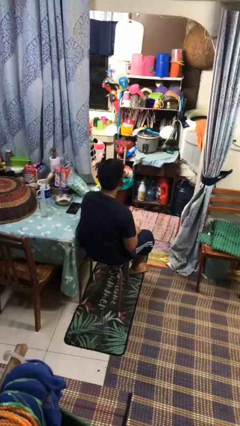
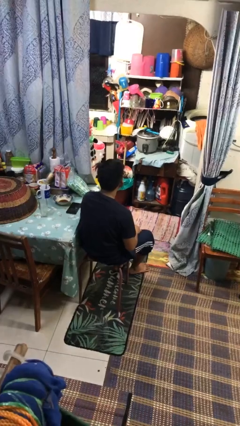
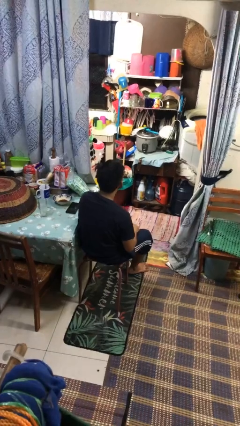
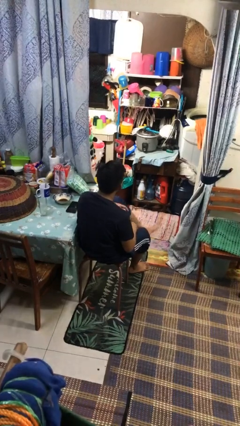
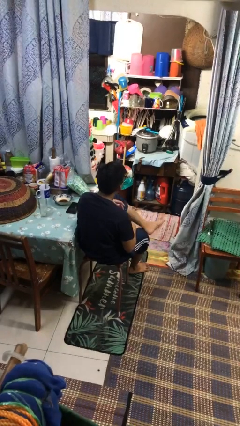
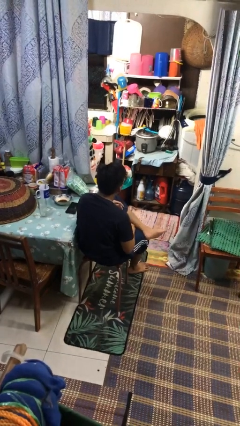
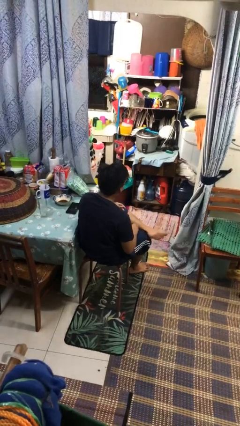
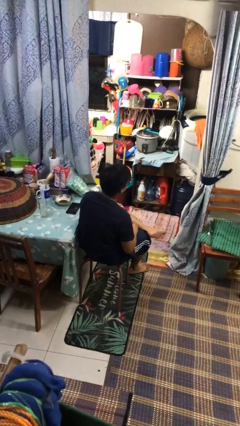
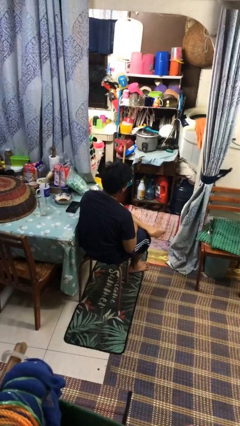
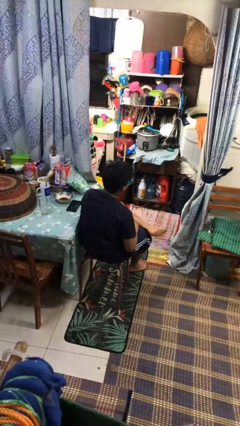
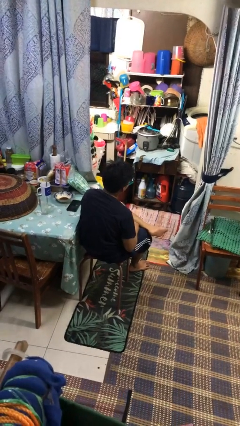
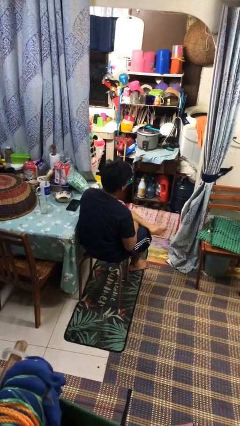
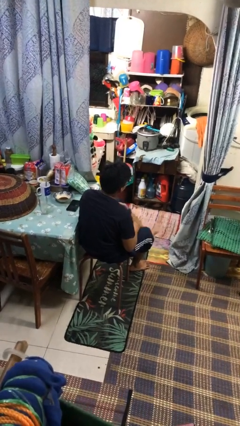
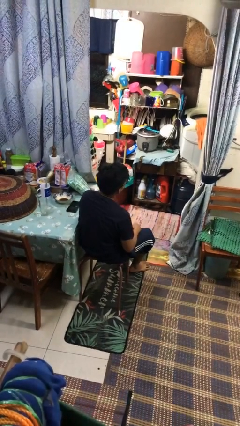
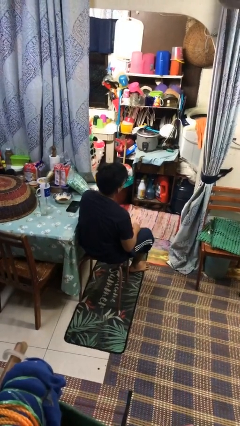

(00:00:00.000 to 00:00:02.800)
person crosses legs

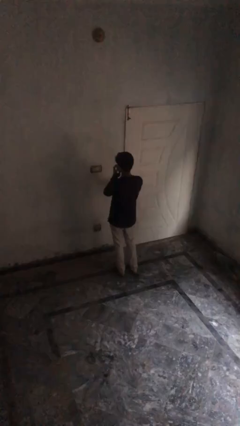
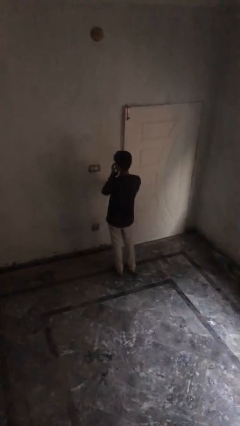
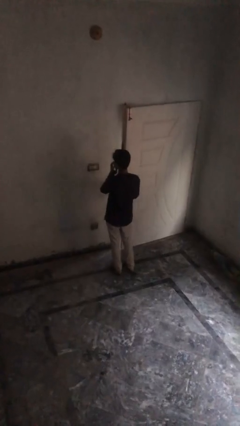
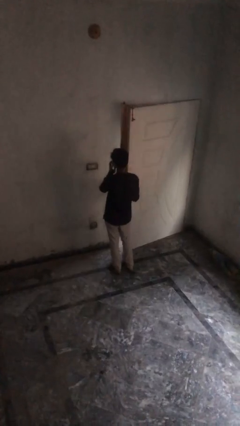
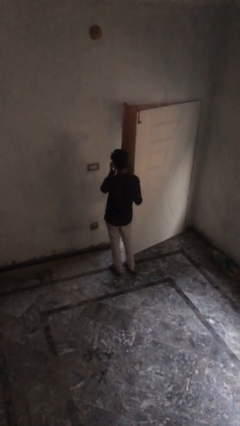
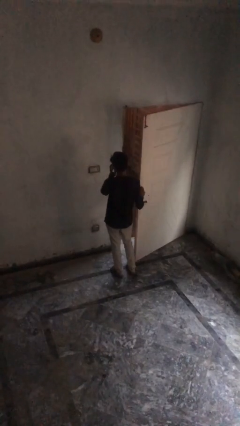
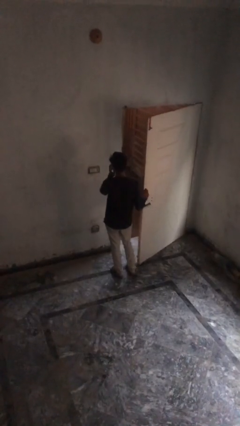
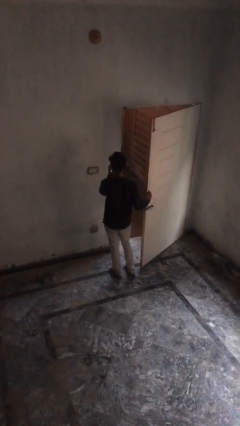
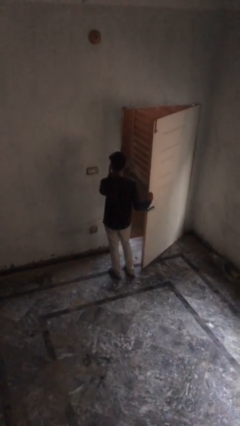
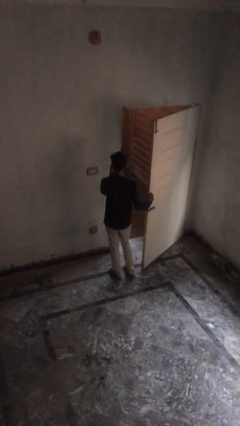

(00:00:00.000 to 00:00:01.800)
person opens facility door

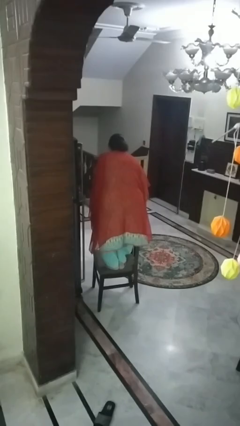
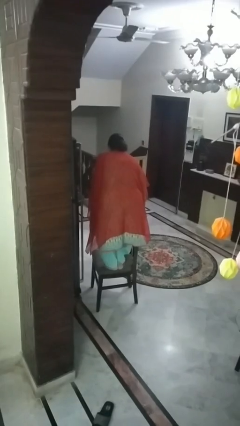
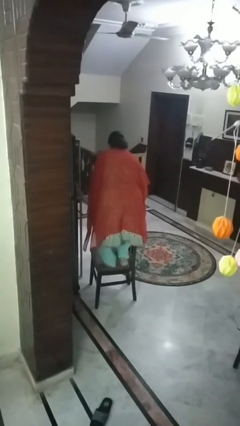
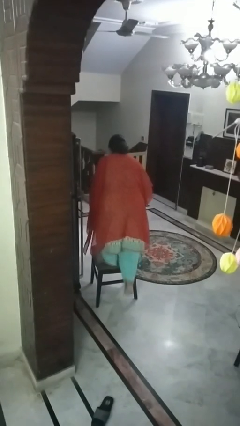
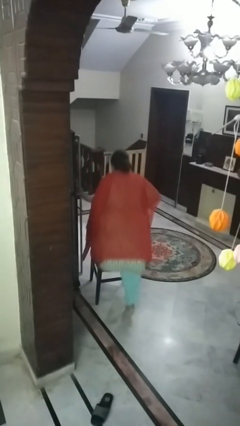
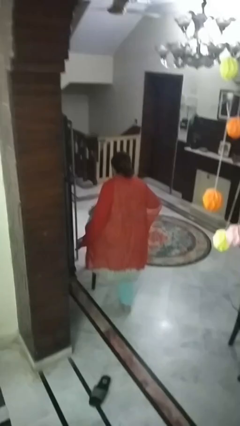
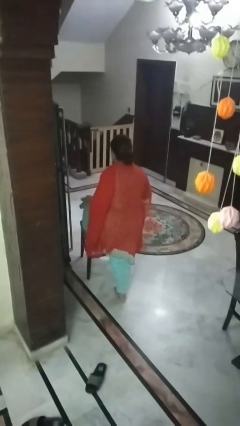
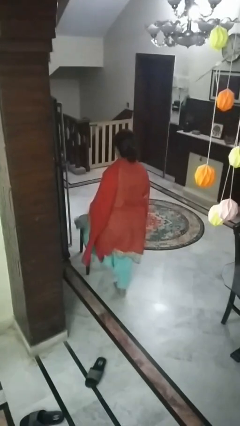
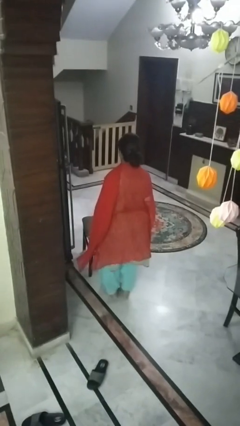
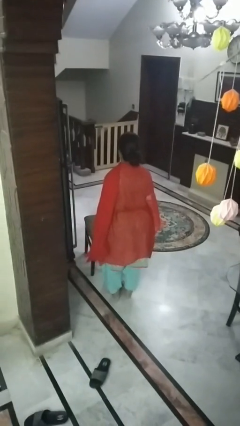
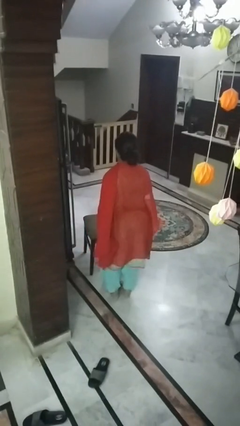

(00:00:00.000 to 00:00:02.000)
person climbs off chair

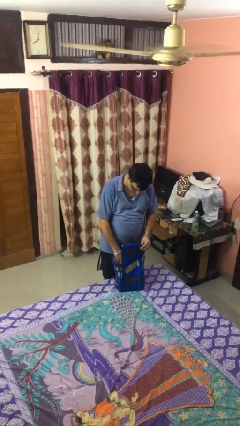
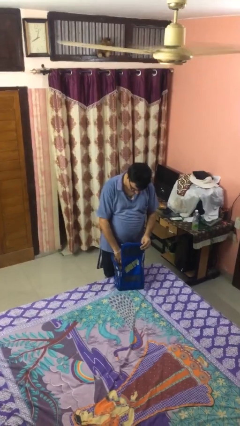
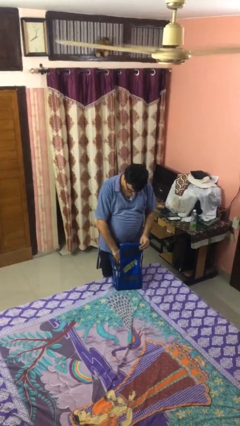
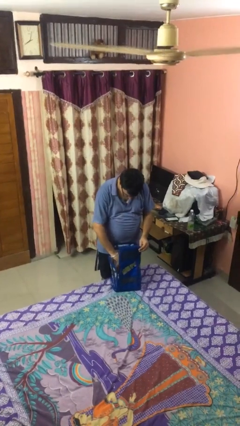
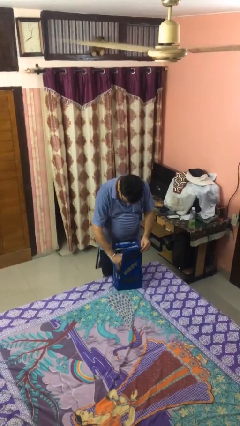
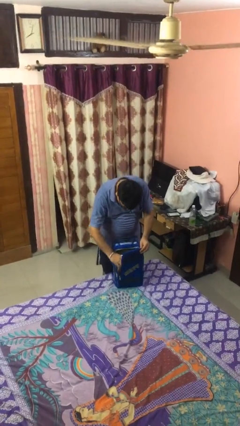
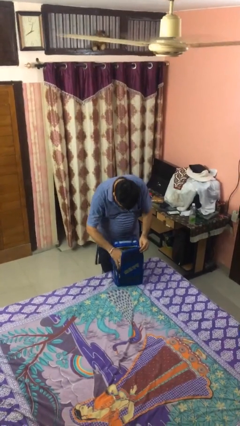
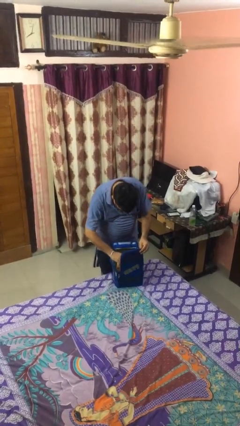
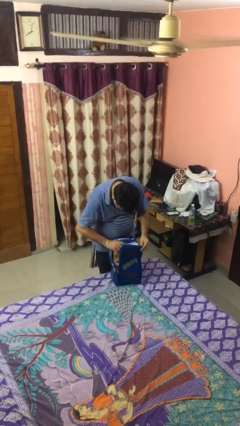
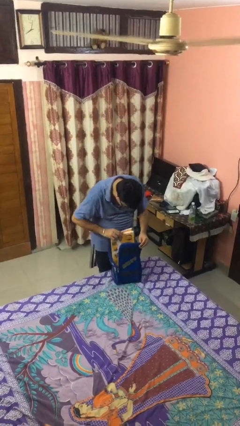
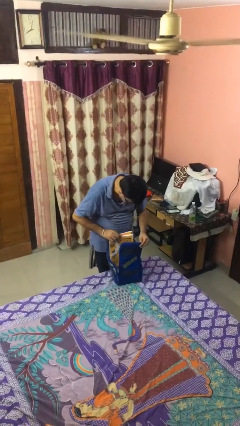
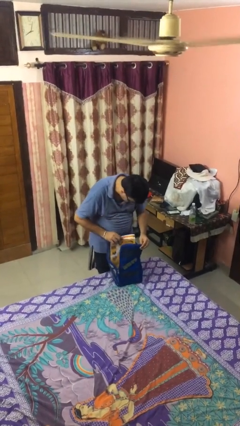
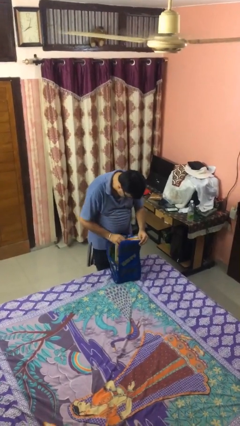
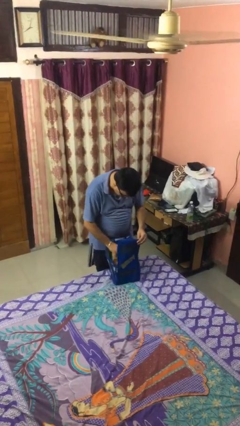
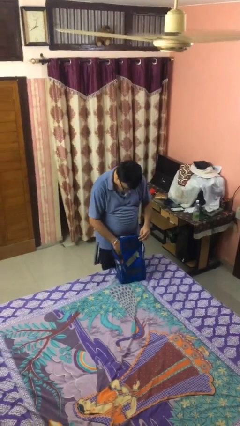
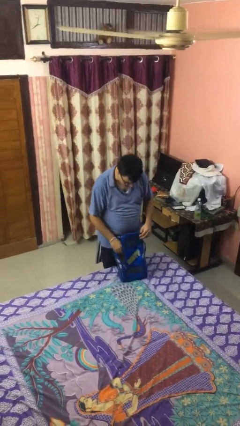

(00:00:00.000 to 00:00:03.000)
person searches in bag

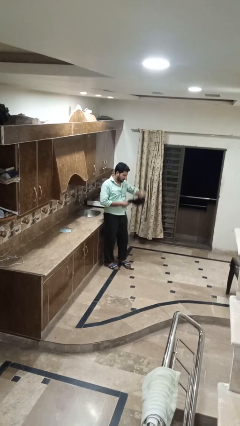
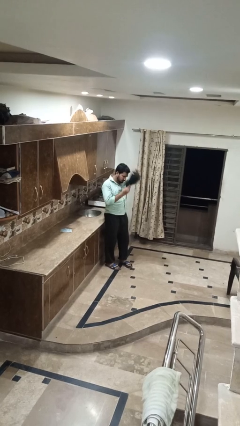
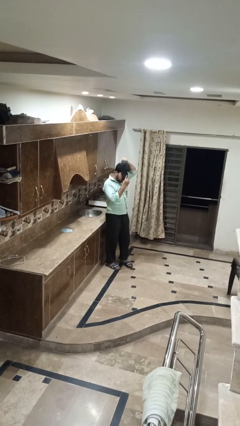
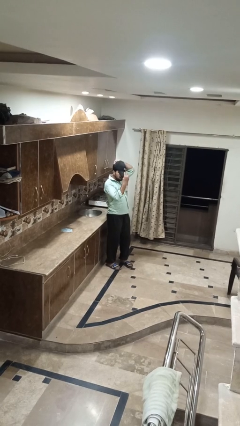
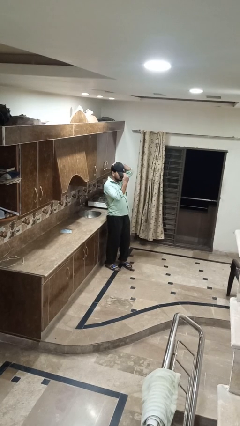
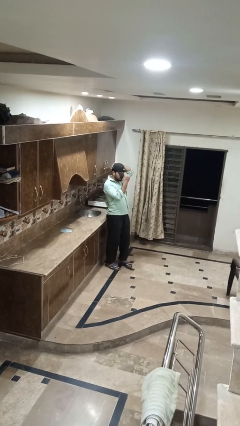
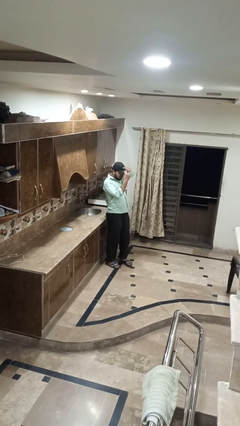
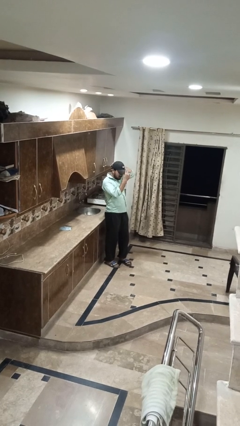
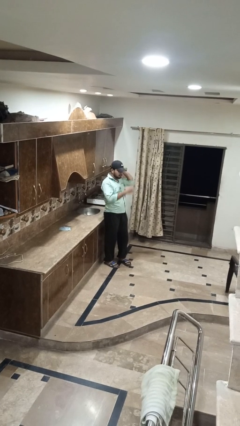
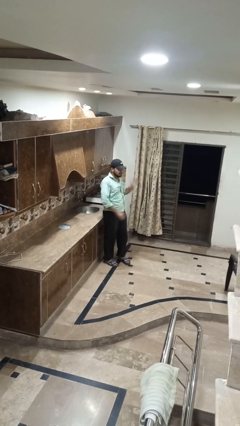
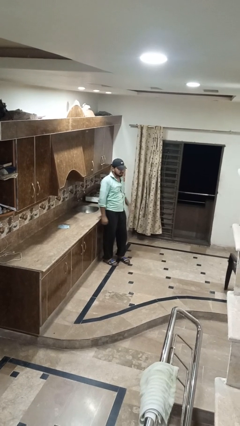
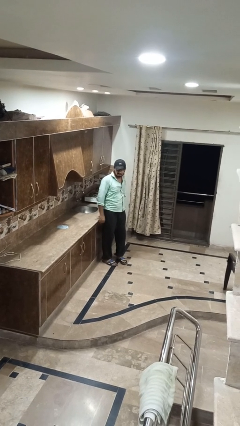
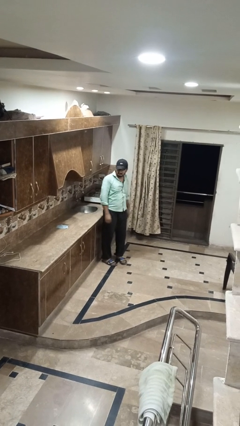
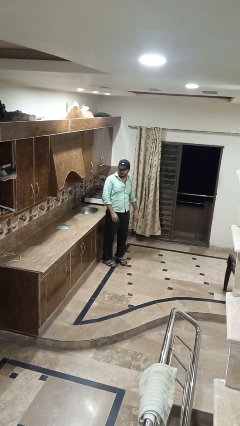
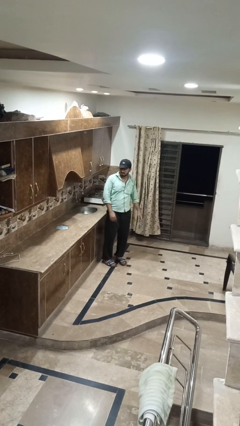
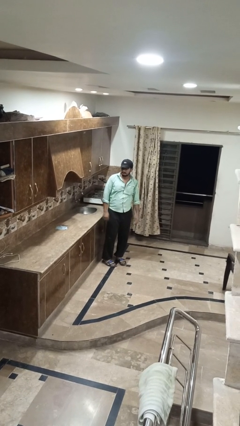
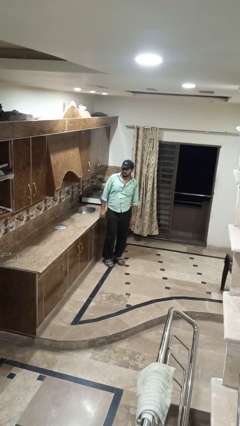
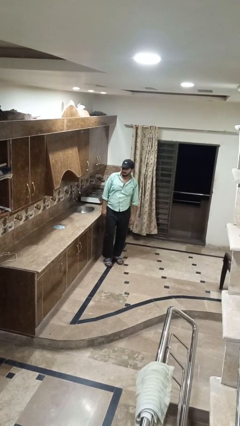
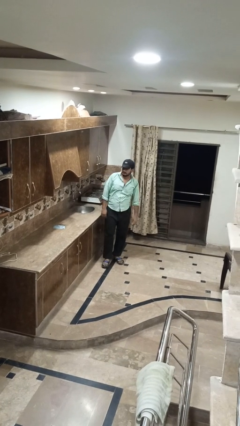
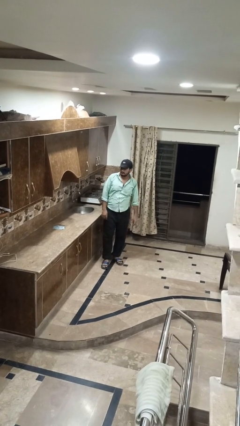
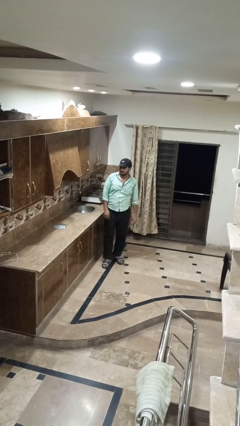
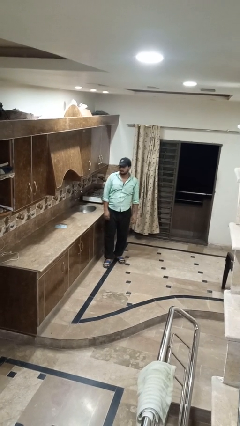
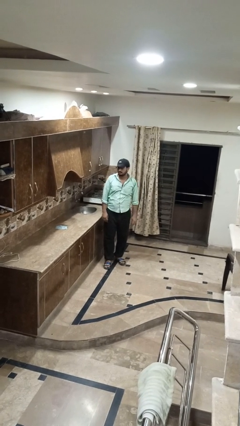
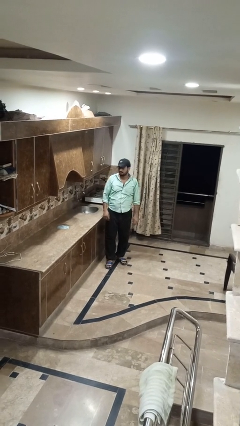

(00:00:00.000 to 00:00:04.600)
person puts on hat

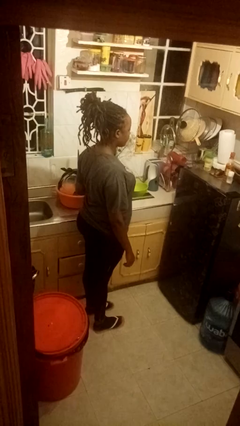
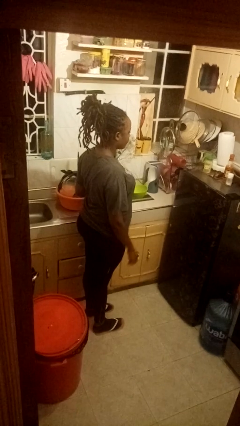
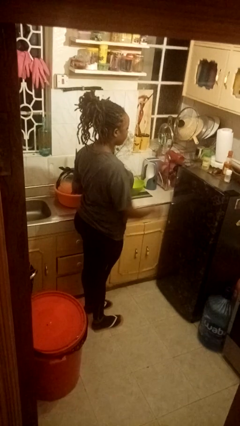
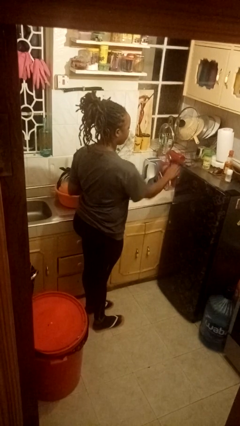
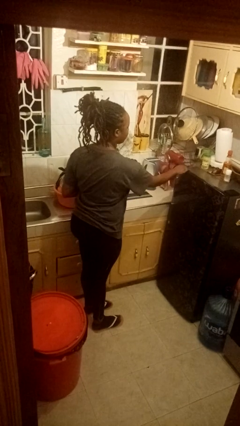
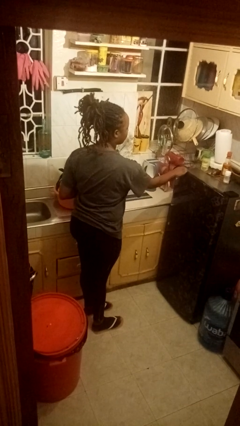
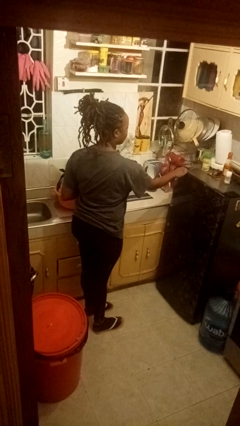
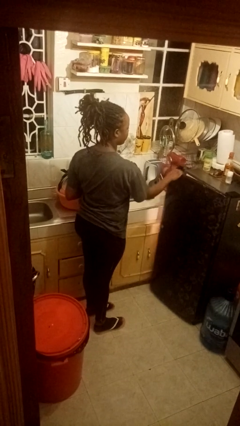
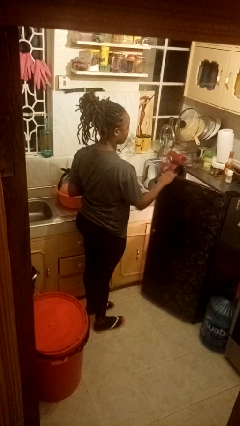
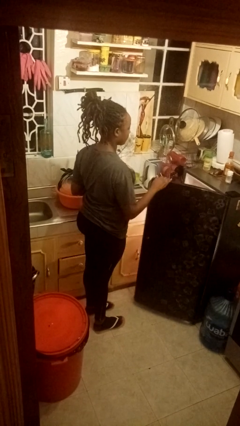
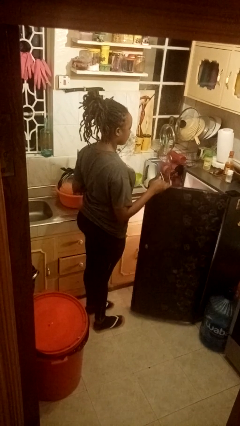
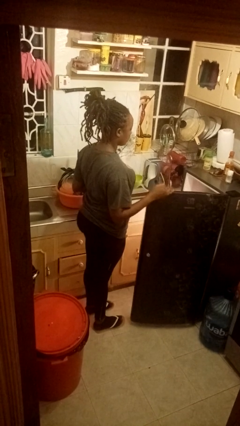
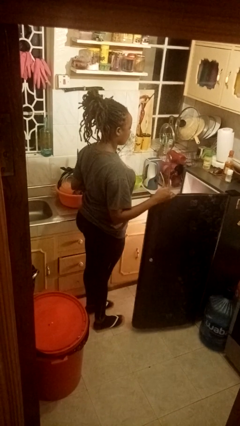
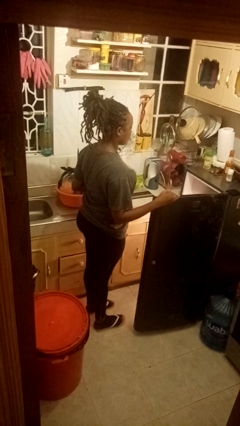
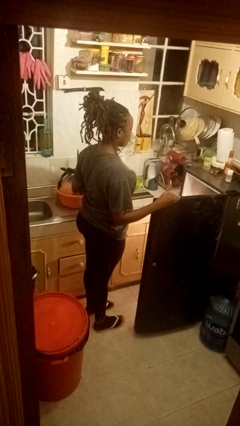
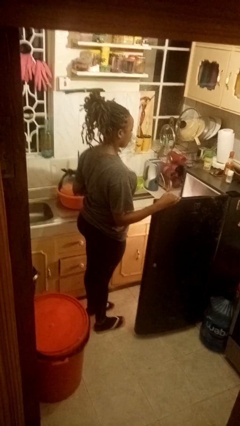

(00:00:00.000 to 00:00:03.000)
person opens refrigerator

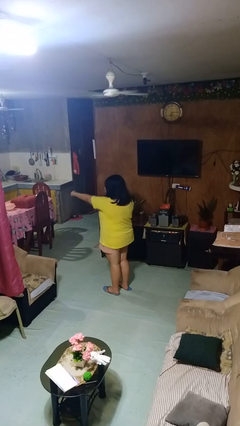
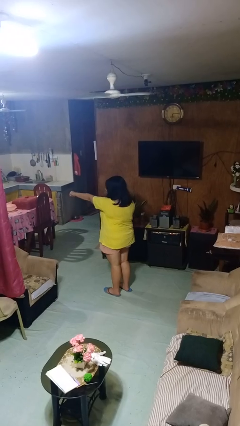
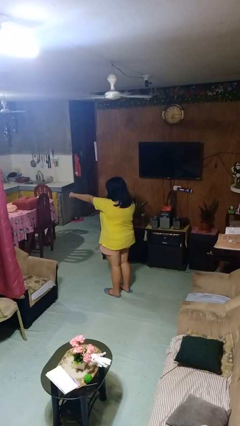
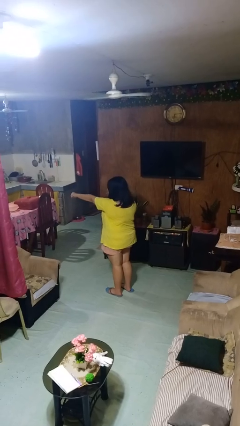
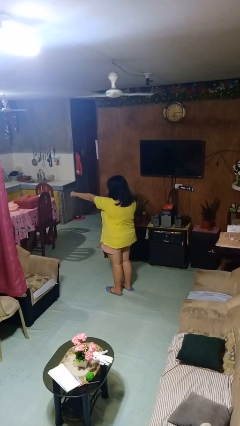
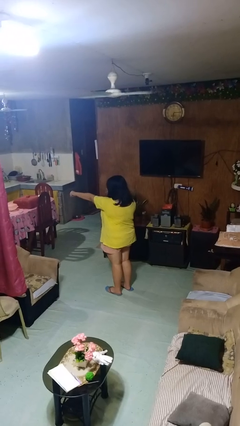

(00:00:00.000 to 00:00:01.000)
person punches
